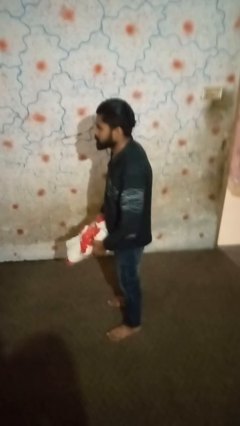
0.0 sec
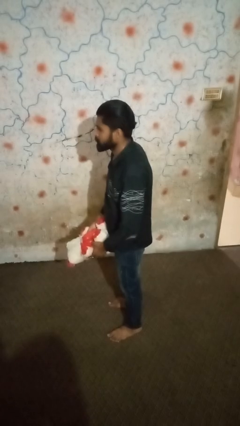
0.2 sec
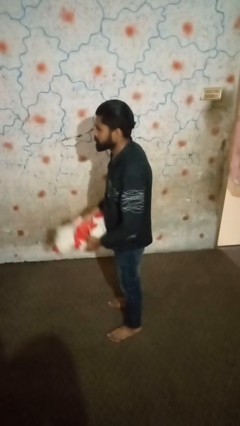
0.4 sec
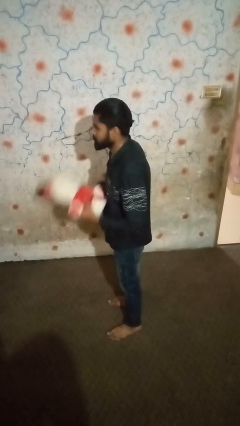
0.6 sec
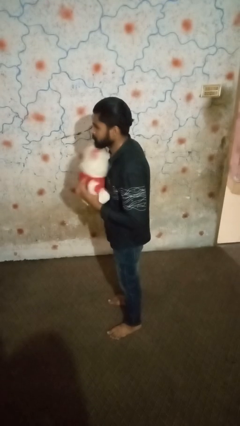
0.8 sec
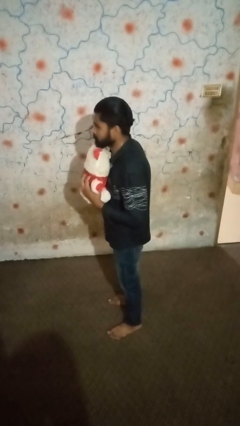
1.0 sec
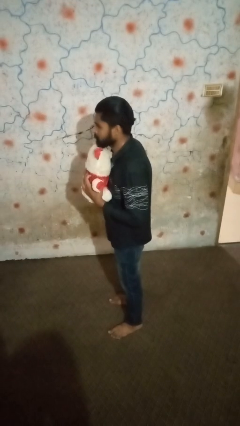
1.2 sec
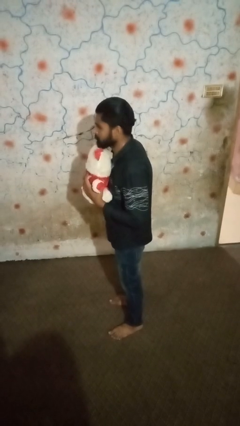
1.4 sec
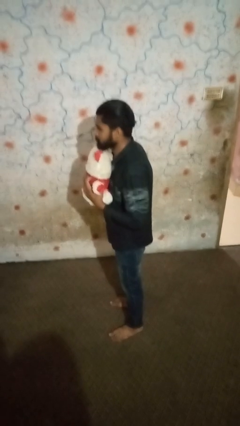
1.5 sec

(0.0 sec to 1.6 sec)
person hugs stuffed animal

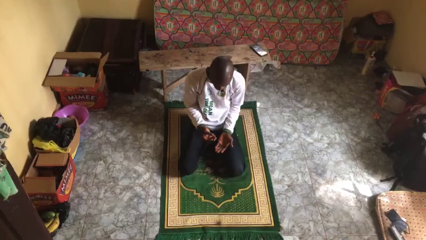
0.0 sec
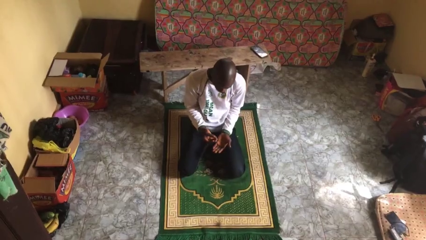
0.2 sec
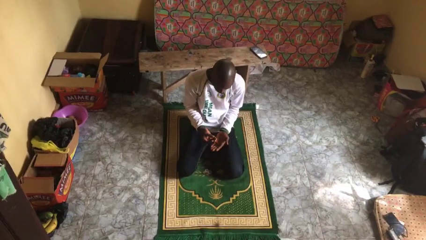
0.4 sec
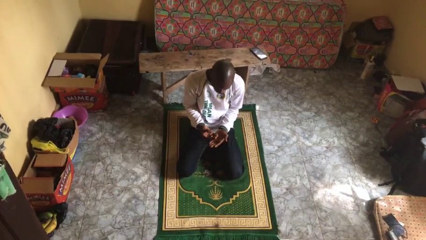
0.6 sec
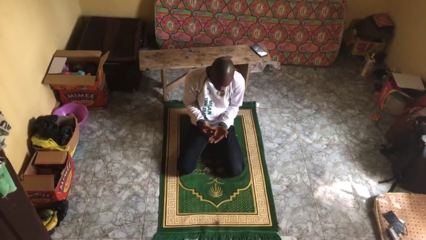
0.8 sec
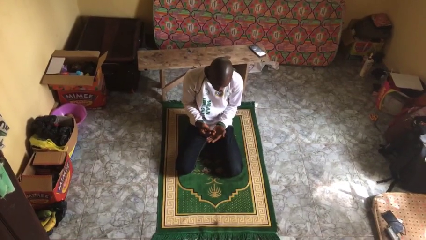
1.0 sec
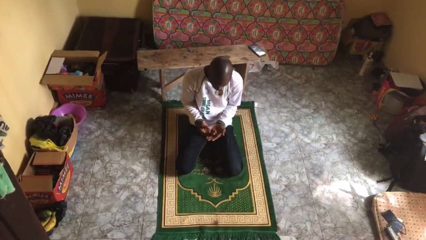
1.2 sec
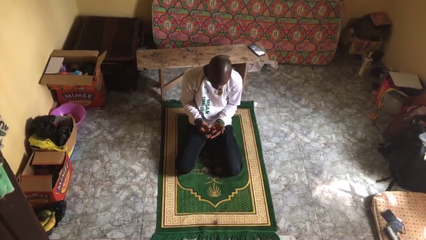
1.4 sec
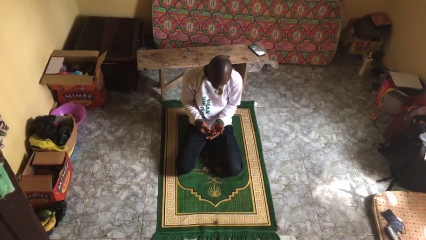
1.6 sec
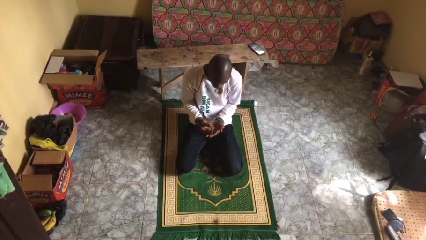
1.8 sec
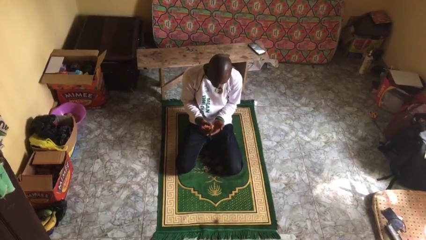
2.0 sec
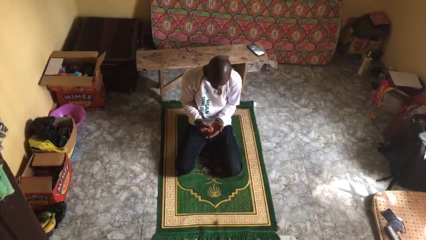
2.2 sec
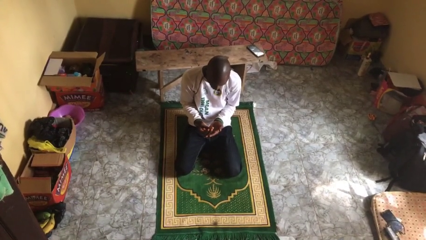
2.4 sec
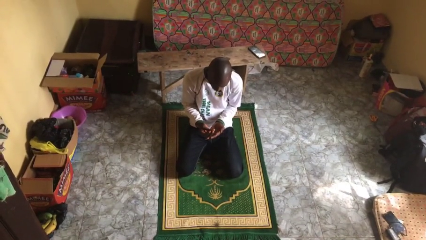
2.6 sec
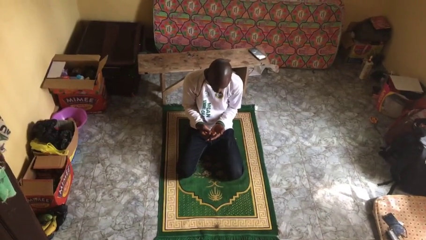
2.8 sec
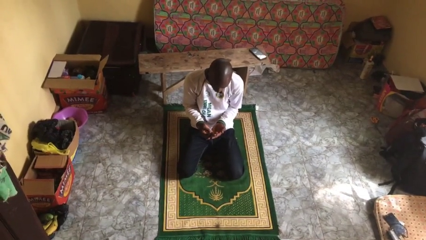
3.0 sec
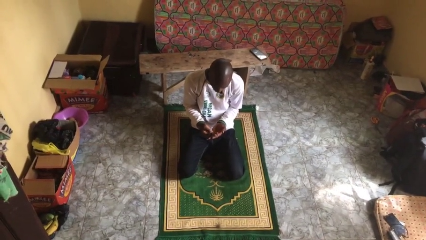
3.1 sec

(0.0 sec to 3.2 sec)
person prays

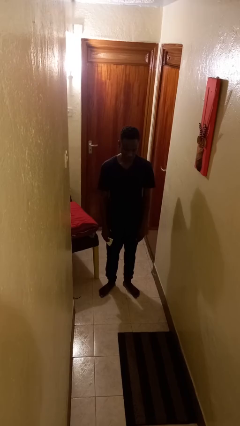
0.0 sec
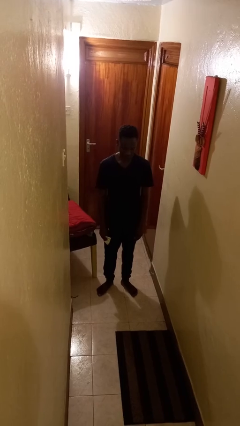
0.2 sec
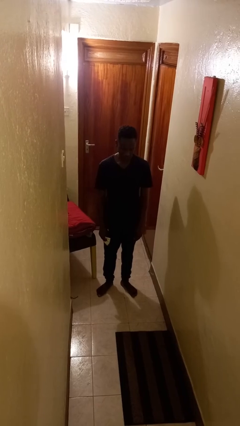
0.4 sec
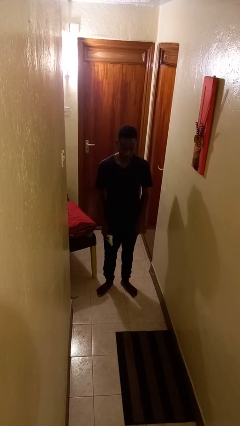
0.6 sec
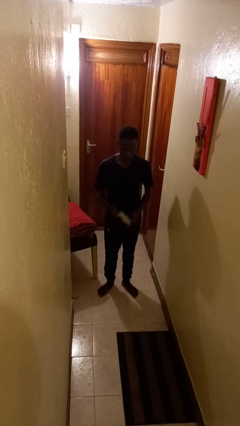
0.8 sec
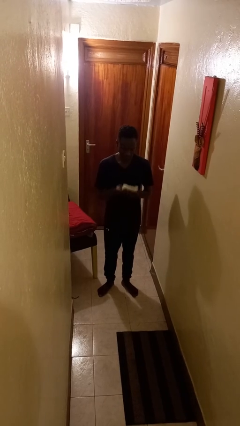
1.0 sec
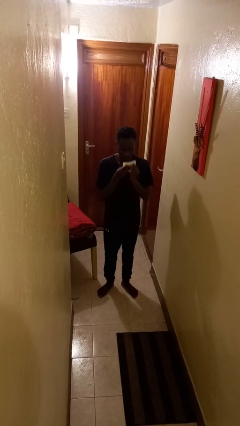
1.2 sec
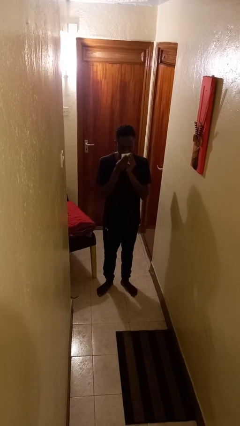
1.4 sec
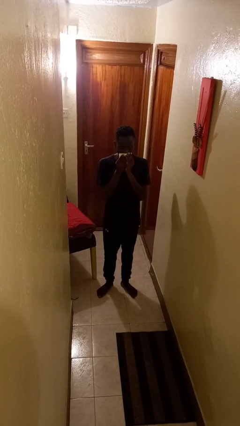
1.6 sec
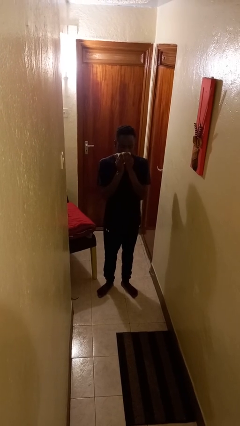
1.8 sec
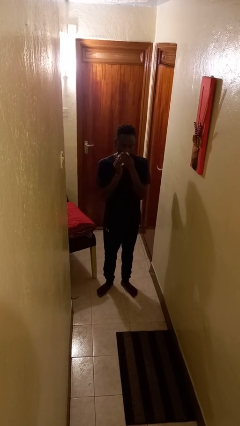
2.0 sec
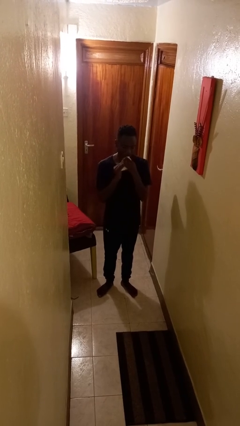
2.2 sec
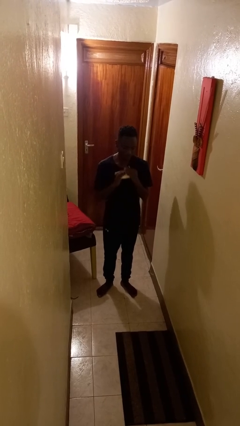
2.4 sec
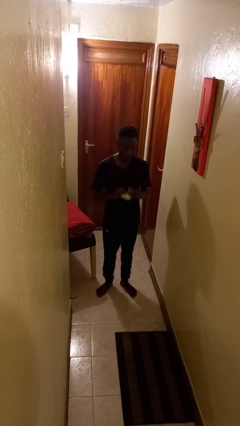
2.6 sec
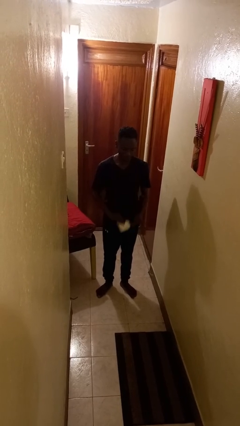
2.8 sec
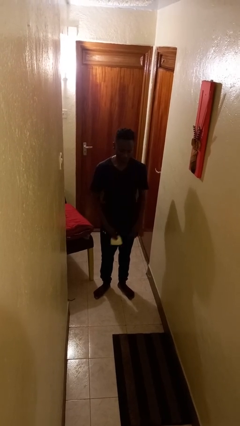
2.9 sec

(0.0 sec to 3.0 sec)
person wipes mouth with napkin

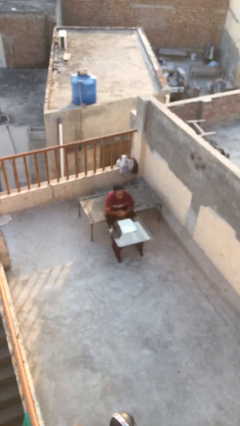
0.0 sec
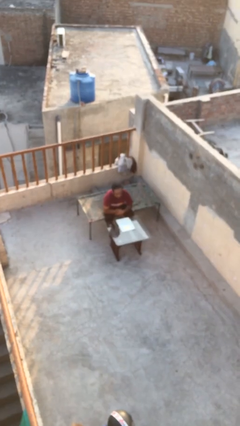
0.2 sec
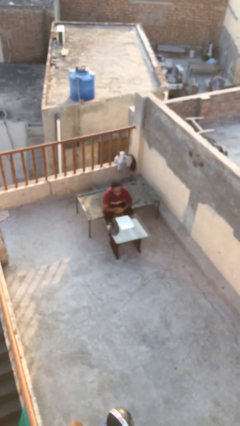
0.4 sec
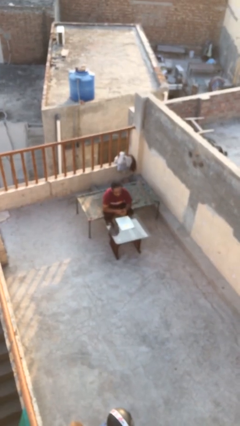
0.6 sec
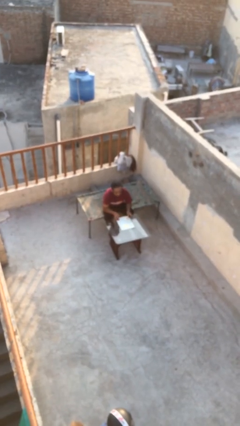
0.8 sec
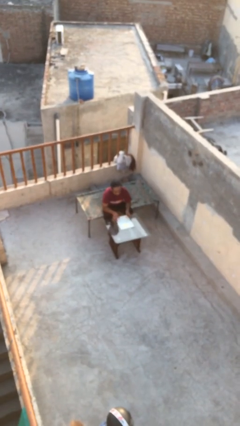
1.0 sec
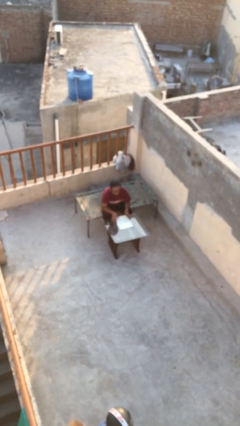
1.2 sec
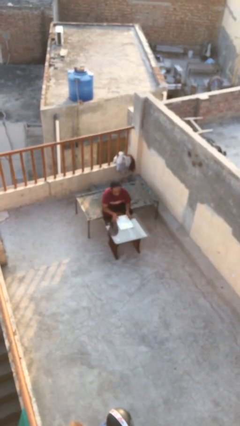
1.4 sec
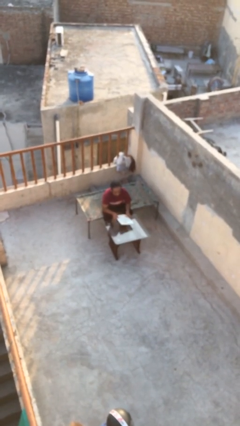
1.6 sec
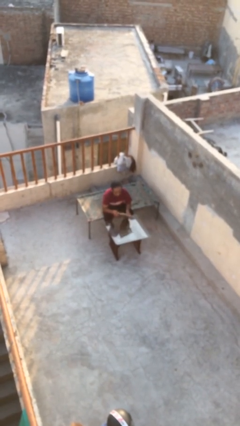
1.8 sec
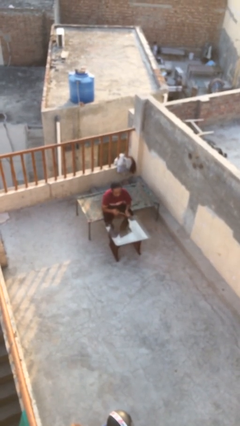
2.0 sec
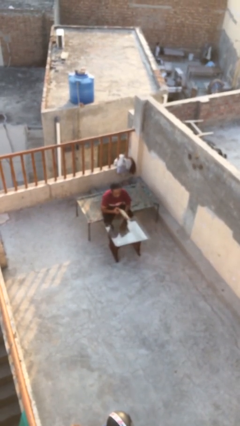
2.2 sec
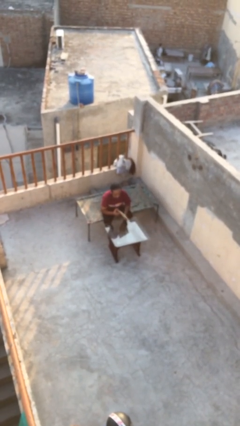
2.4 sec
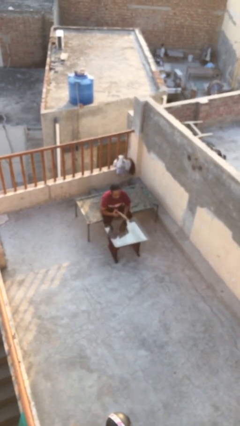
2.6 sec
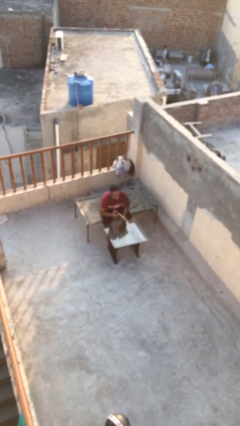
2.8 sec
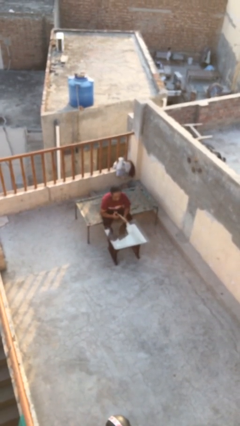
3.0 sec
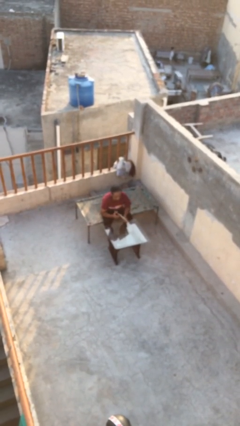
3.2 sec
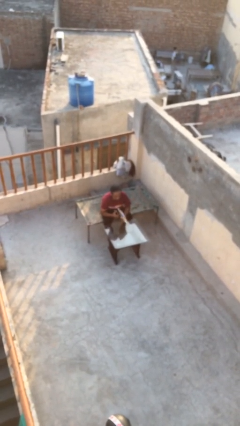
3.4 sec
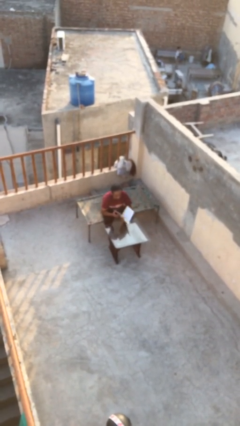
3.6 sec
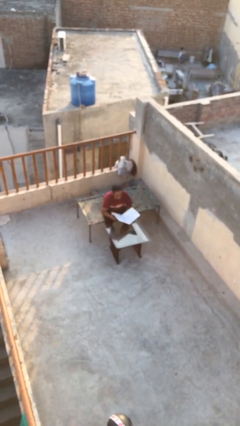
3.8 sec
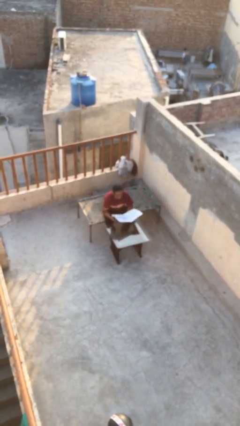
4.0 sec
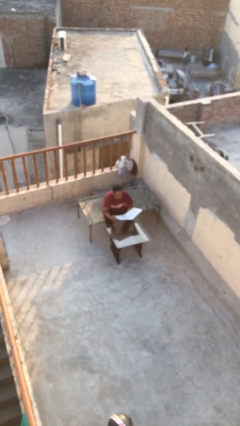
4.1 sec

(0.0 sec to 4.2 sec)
person picks up object from table

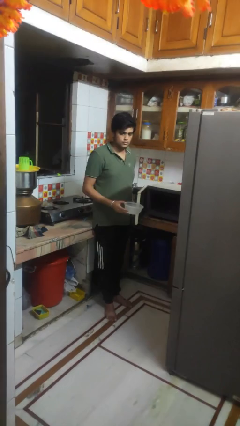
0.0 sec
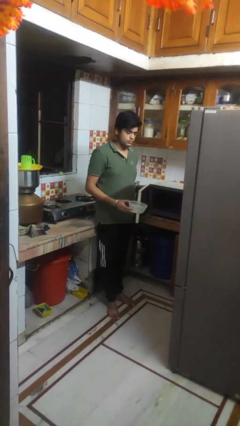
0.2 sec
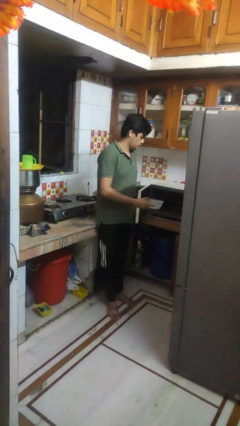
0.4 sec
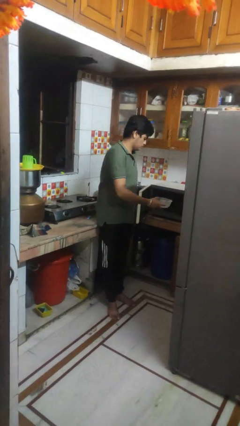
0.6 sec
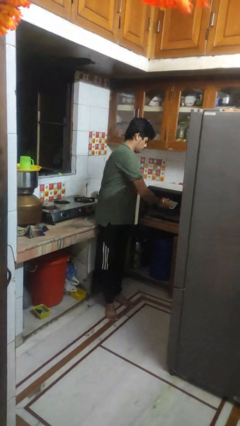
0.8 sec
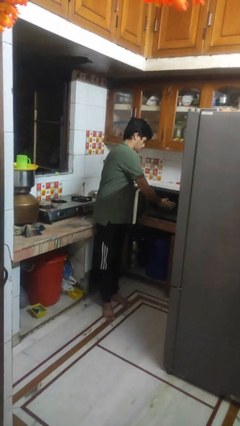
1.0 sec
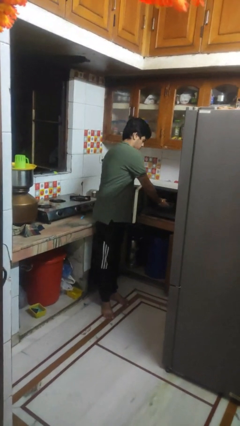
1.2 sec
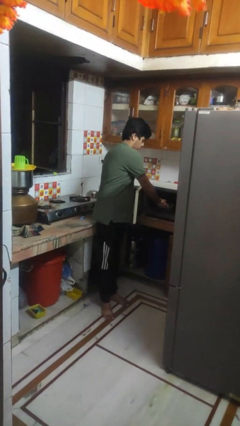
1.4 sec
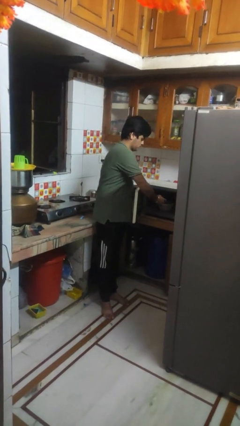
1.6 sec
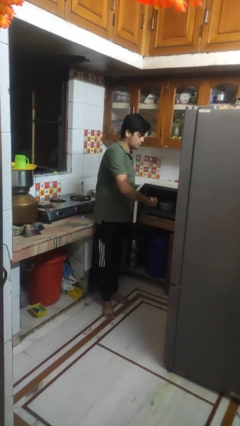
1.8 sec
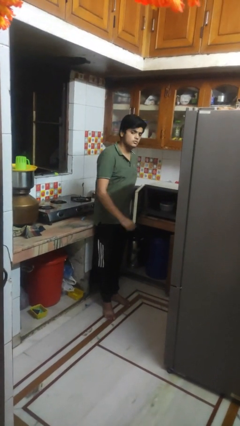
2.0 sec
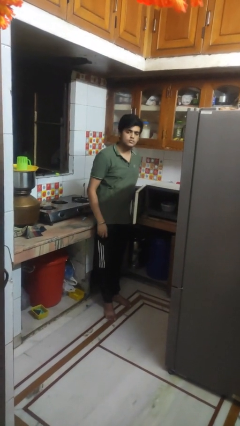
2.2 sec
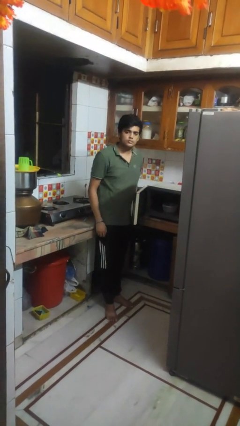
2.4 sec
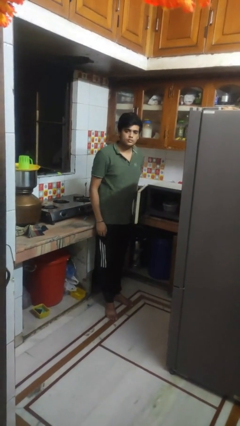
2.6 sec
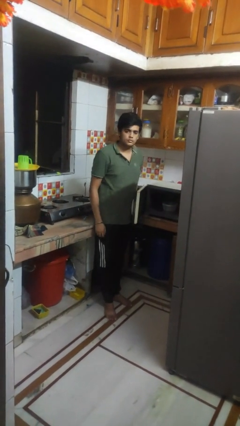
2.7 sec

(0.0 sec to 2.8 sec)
person puts object into microwave

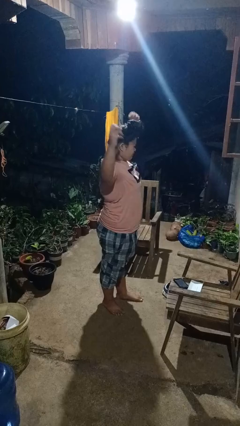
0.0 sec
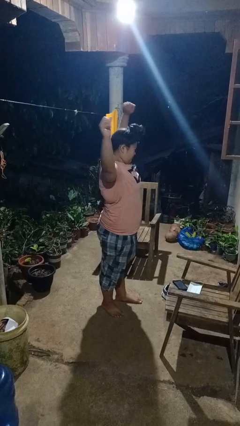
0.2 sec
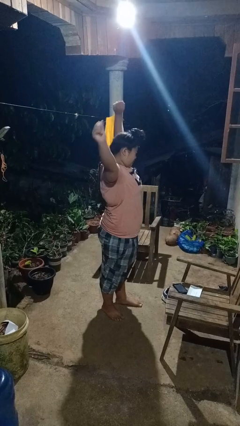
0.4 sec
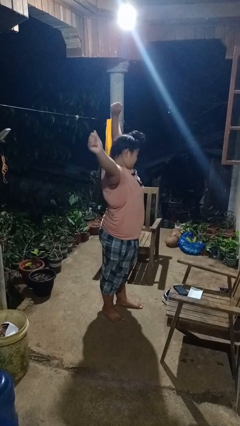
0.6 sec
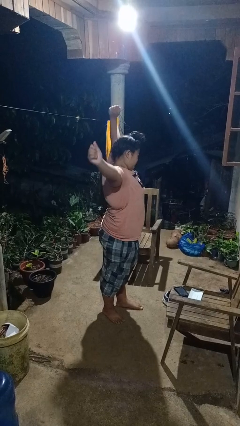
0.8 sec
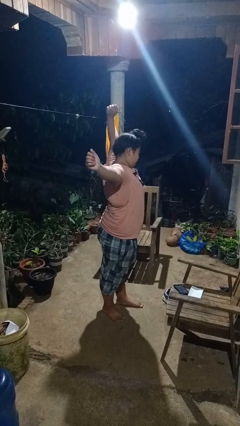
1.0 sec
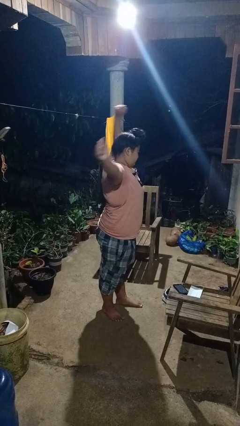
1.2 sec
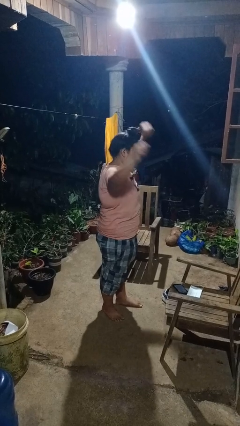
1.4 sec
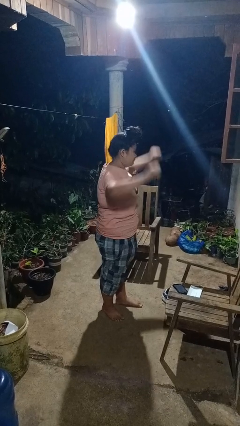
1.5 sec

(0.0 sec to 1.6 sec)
person stretches arms over head

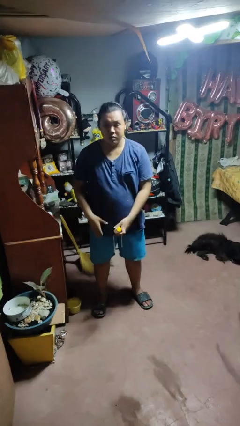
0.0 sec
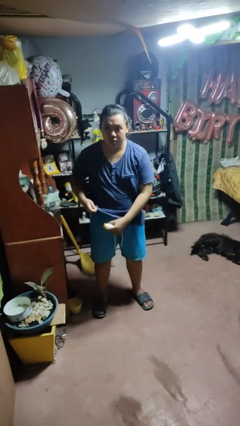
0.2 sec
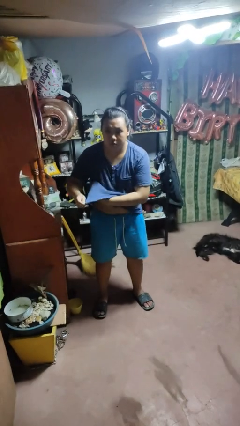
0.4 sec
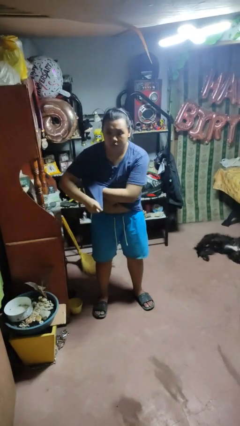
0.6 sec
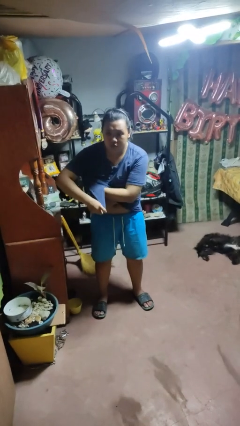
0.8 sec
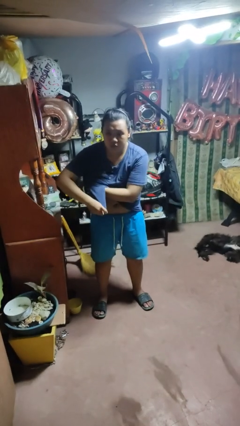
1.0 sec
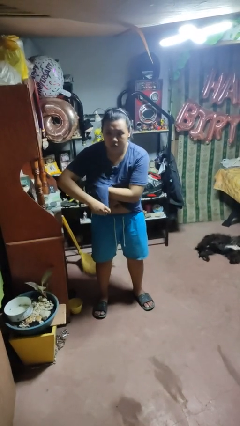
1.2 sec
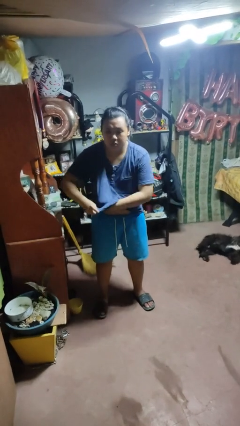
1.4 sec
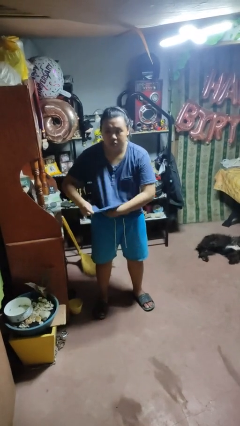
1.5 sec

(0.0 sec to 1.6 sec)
person applies deodorant
